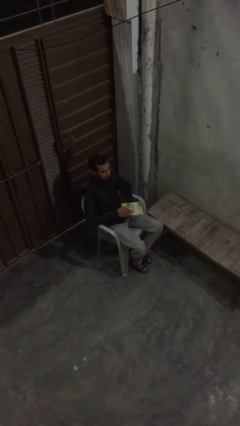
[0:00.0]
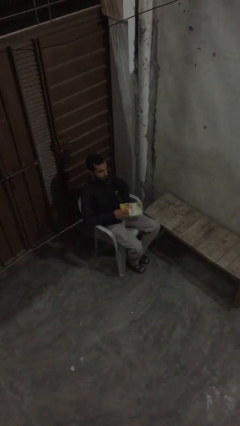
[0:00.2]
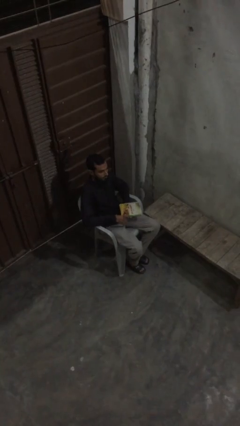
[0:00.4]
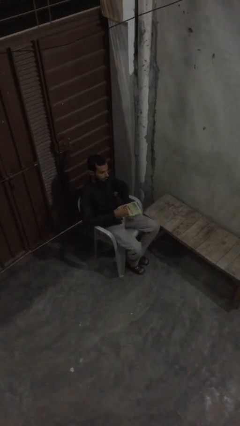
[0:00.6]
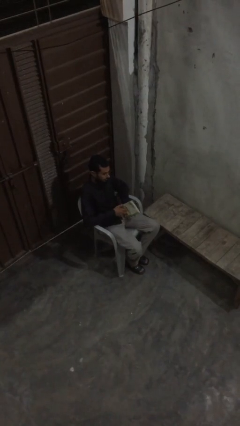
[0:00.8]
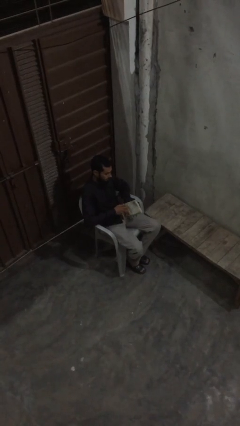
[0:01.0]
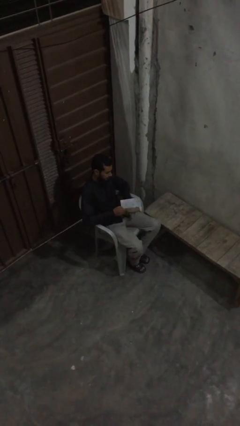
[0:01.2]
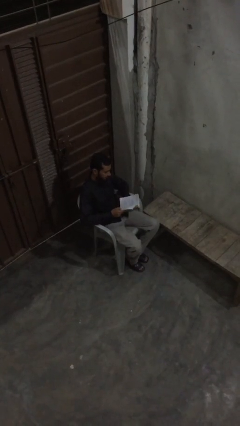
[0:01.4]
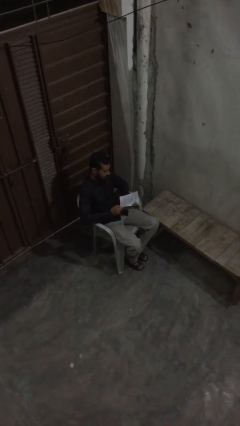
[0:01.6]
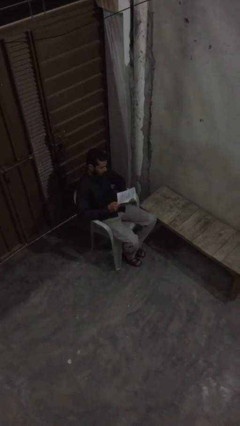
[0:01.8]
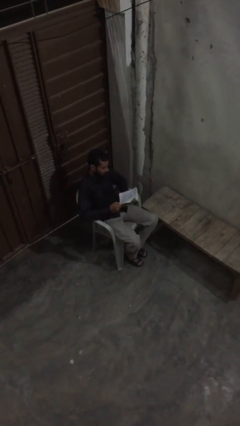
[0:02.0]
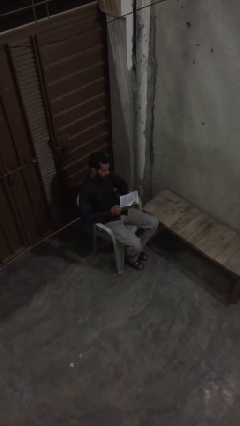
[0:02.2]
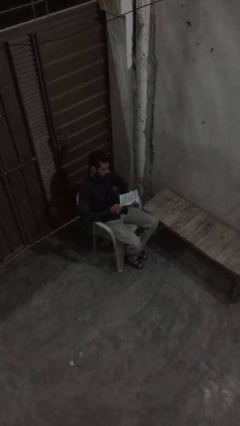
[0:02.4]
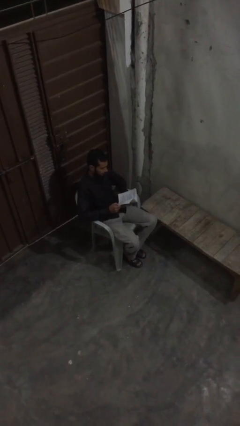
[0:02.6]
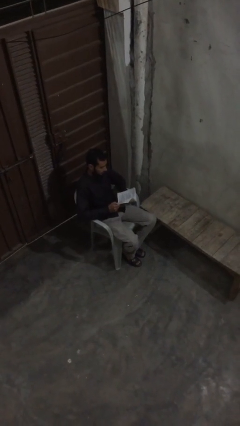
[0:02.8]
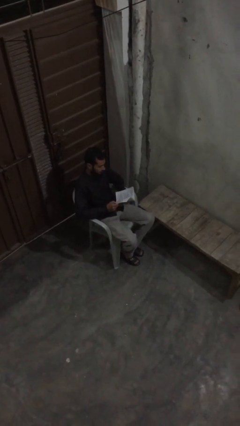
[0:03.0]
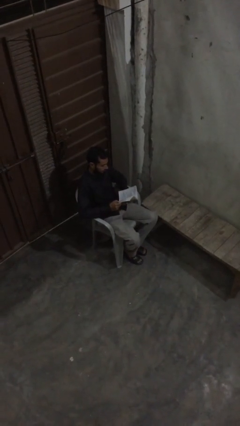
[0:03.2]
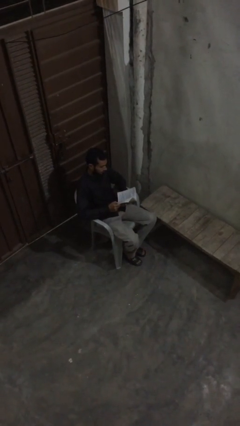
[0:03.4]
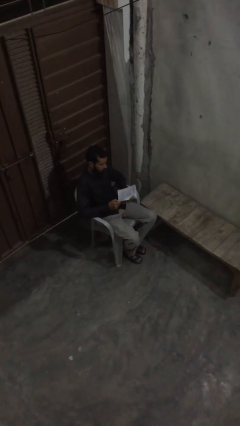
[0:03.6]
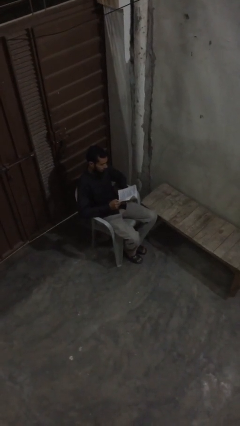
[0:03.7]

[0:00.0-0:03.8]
person reads document

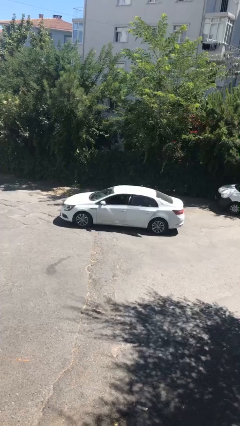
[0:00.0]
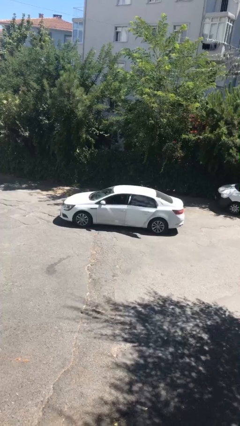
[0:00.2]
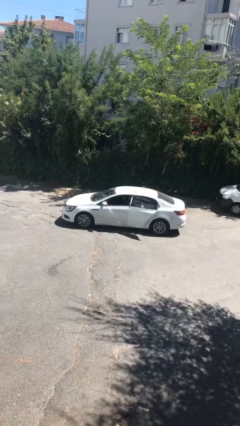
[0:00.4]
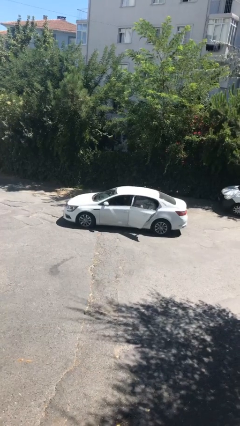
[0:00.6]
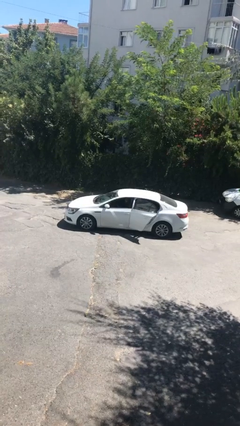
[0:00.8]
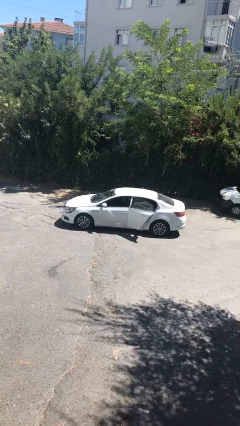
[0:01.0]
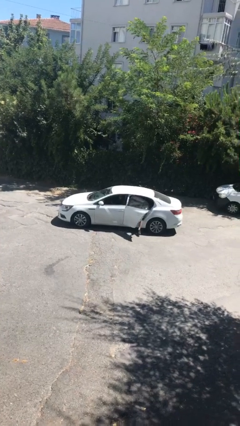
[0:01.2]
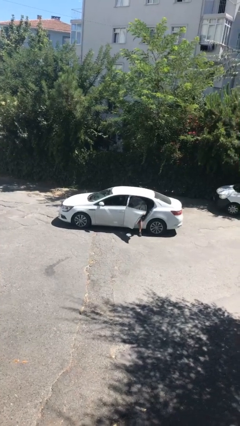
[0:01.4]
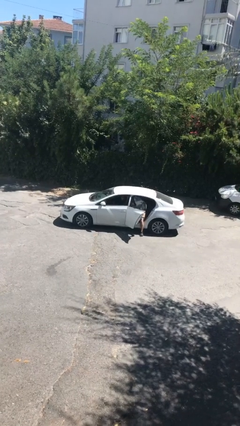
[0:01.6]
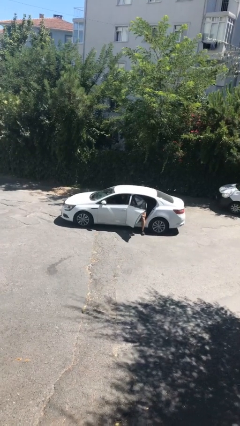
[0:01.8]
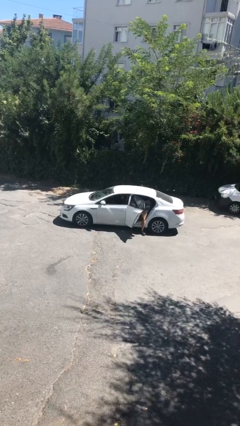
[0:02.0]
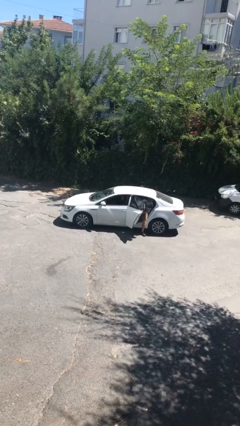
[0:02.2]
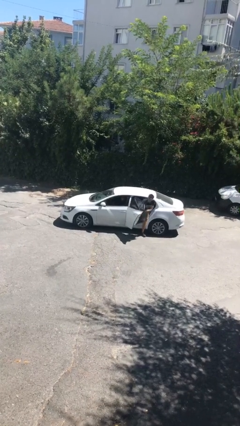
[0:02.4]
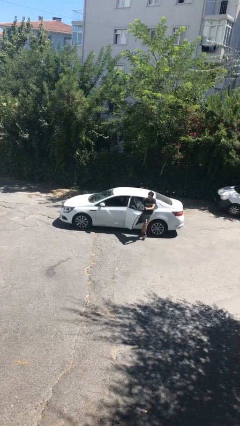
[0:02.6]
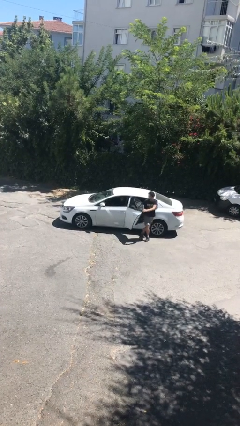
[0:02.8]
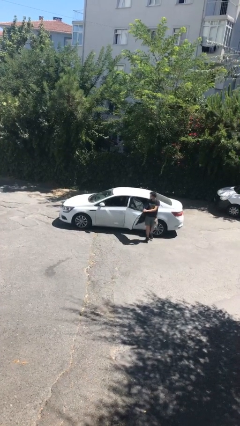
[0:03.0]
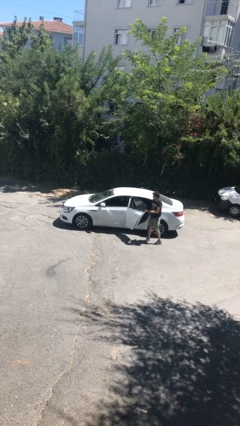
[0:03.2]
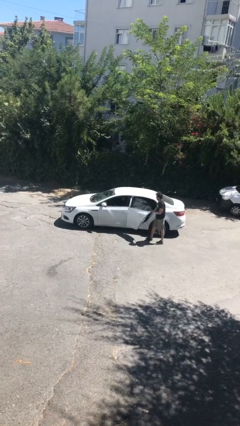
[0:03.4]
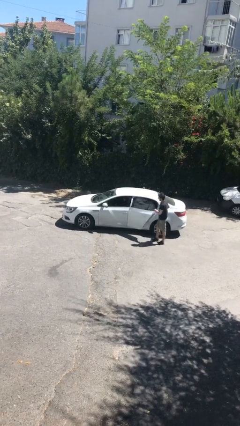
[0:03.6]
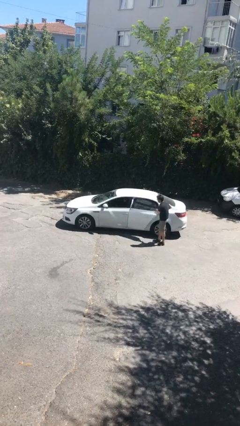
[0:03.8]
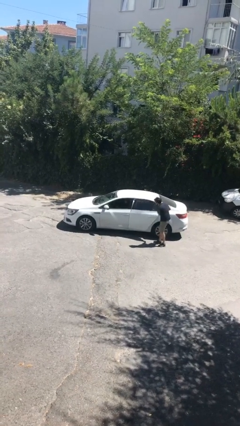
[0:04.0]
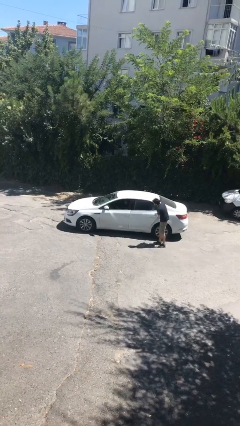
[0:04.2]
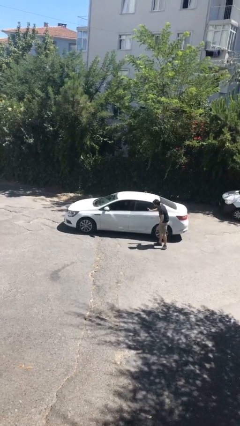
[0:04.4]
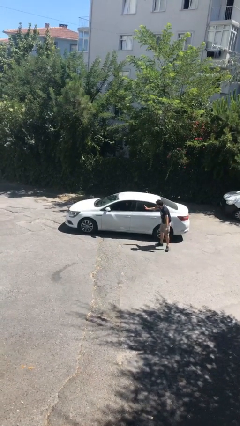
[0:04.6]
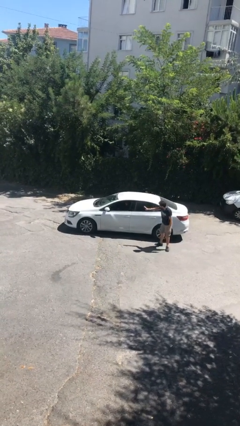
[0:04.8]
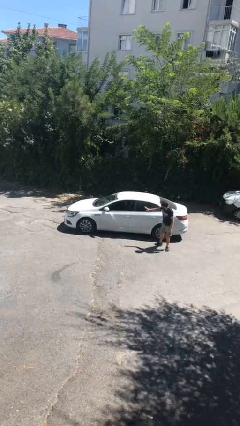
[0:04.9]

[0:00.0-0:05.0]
car drops off person

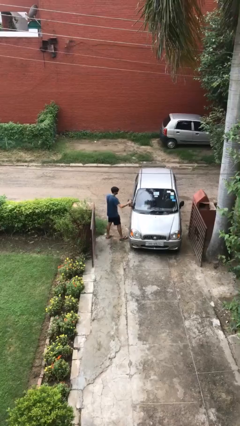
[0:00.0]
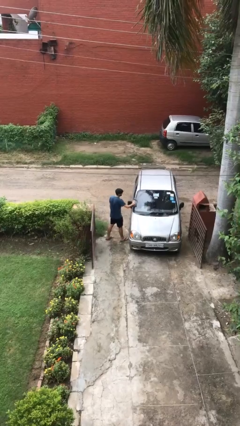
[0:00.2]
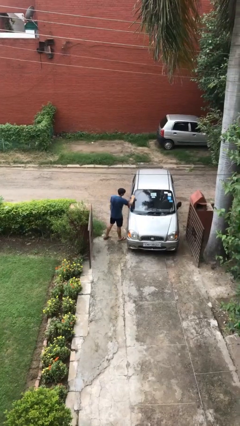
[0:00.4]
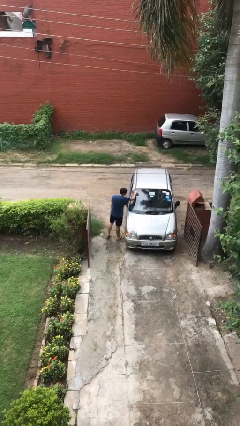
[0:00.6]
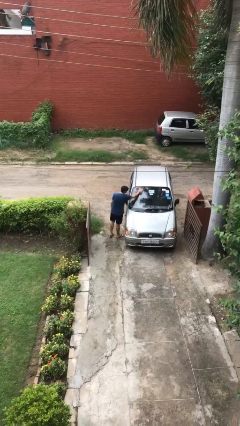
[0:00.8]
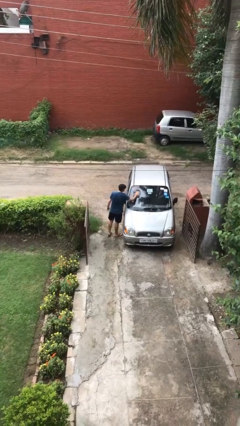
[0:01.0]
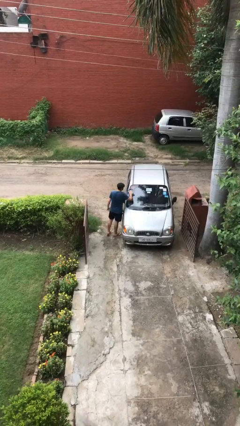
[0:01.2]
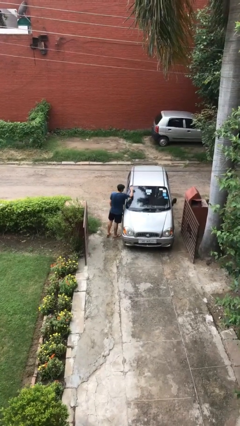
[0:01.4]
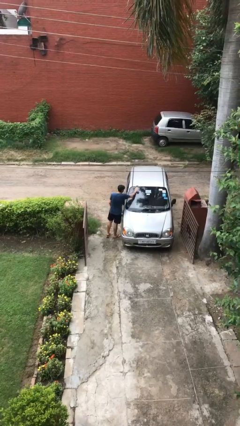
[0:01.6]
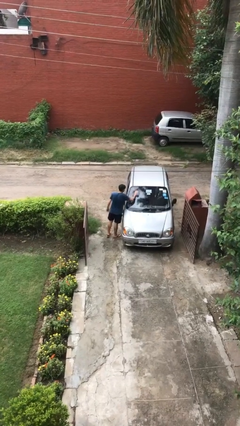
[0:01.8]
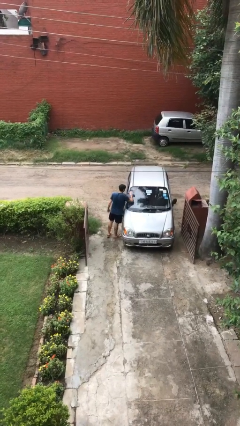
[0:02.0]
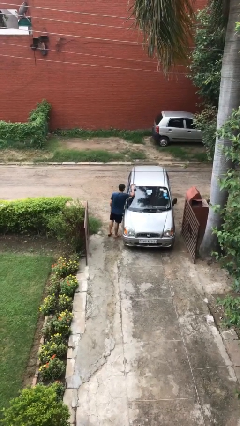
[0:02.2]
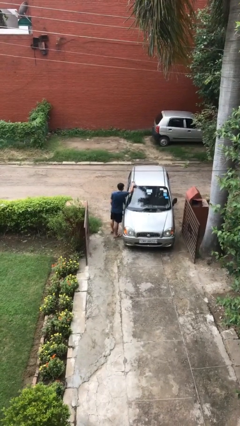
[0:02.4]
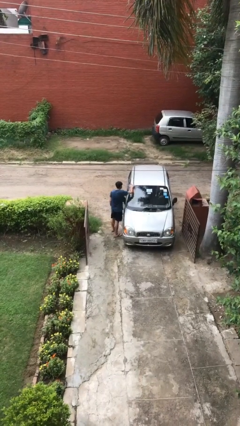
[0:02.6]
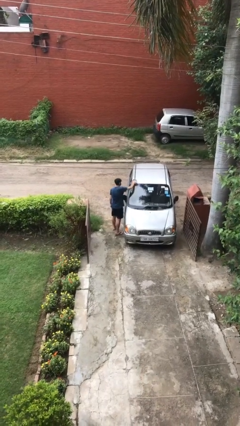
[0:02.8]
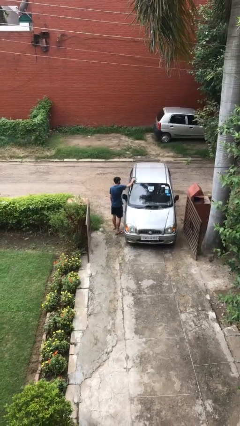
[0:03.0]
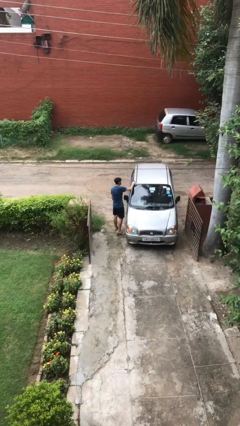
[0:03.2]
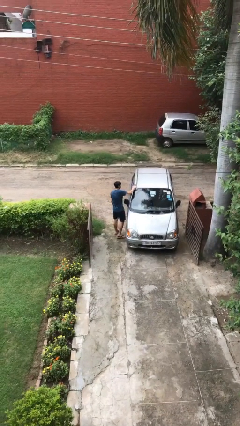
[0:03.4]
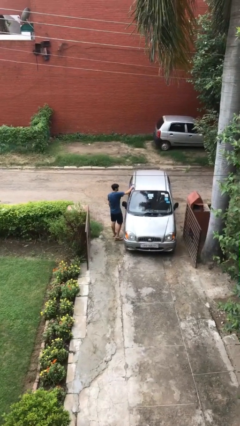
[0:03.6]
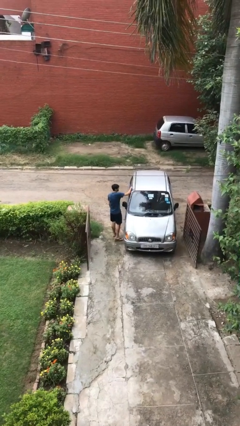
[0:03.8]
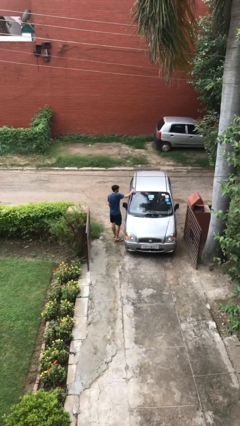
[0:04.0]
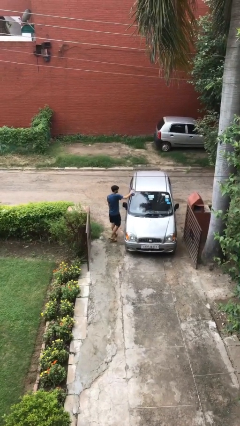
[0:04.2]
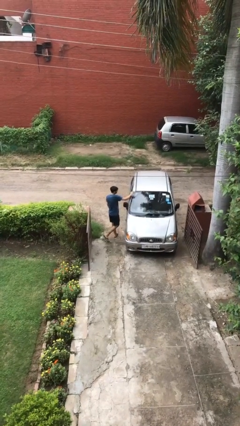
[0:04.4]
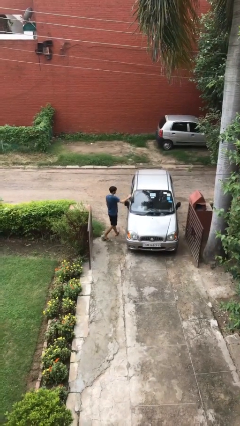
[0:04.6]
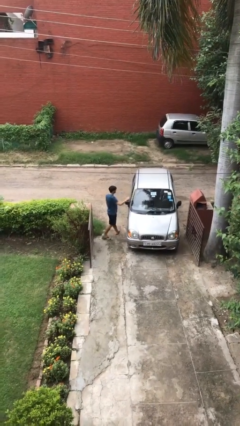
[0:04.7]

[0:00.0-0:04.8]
person polishes car with rag

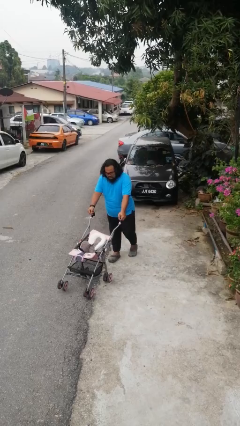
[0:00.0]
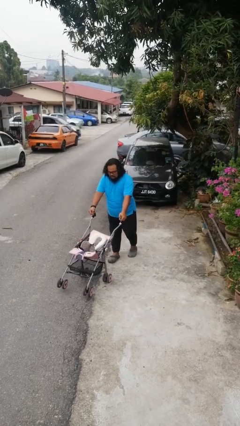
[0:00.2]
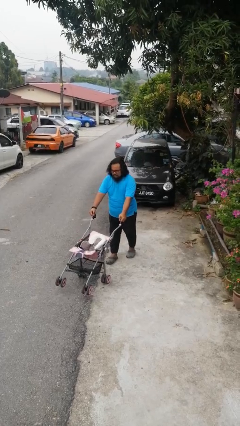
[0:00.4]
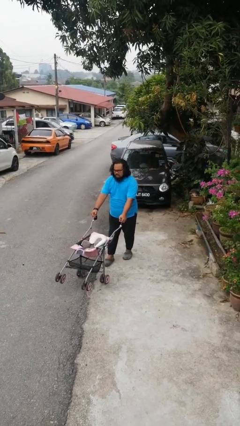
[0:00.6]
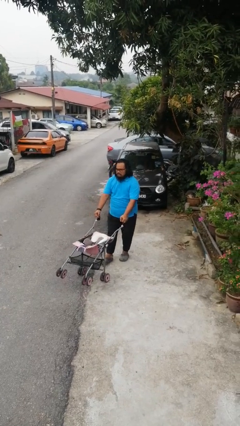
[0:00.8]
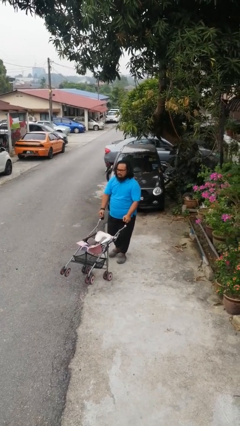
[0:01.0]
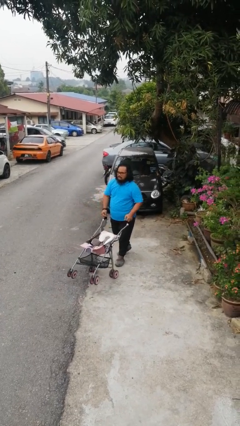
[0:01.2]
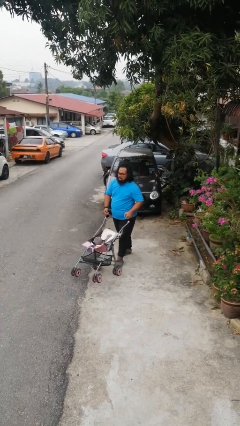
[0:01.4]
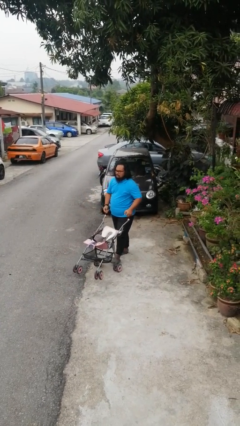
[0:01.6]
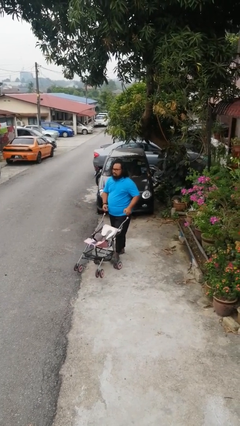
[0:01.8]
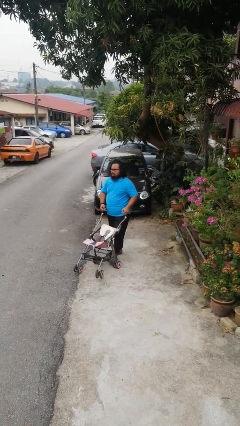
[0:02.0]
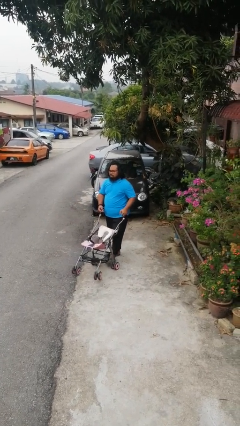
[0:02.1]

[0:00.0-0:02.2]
person pulls wheeled cart

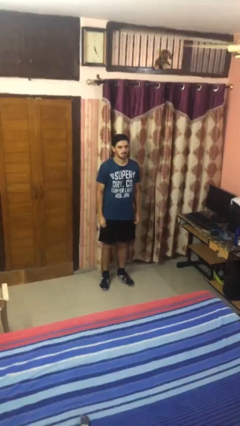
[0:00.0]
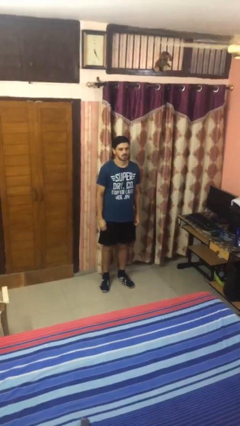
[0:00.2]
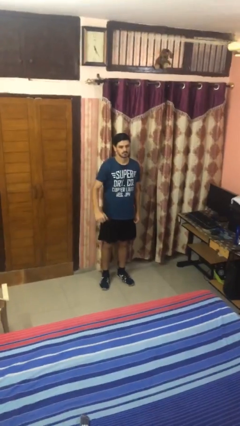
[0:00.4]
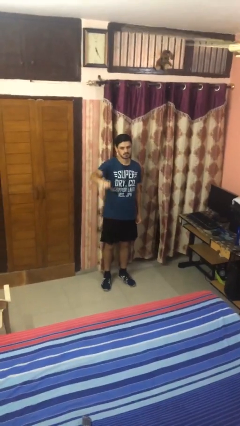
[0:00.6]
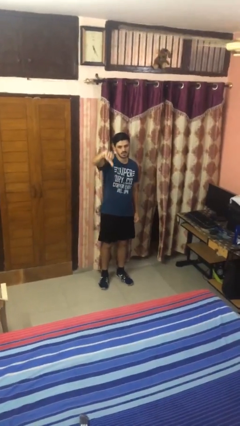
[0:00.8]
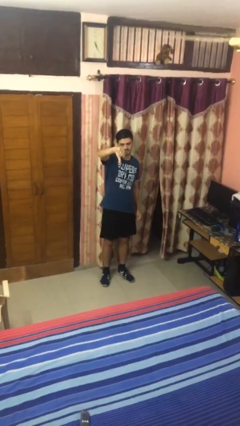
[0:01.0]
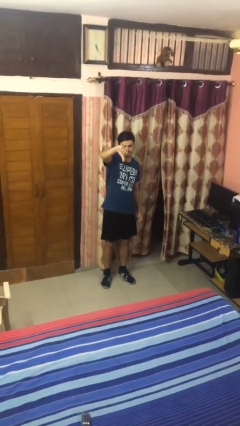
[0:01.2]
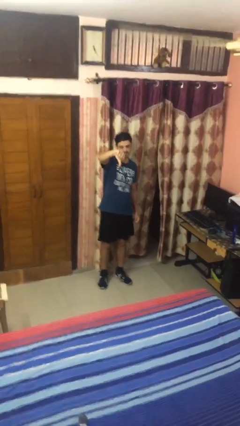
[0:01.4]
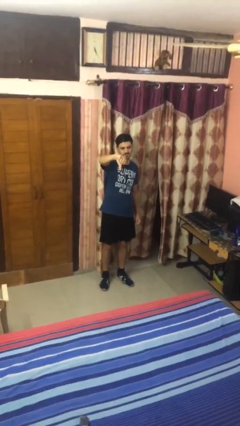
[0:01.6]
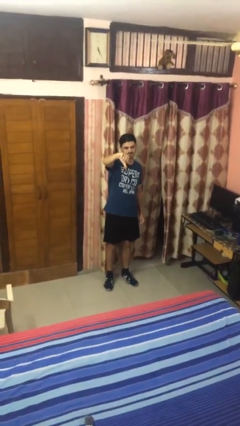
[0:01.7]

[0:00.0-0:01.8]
person gestures thumbs down

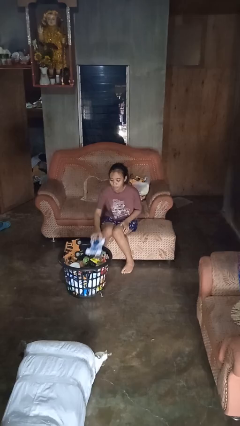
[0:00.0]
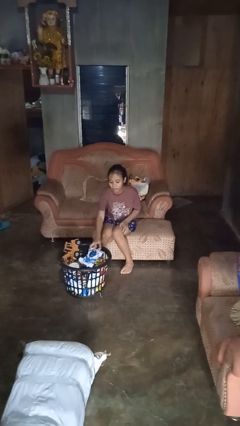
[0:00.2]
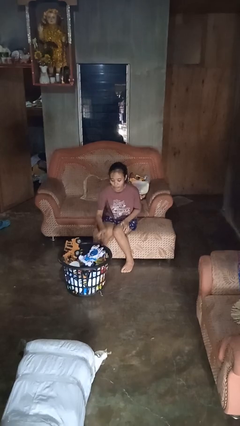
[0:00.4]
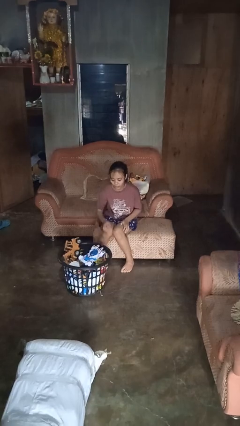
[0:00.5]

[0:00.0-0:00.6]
person puts object into basket
